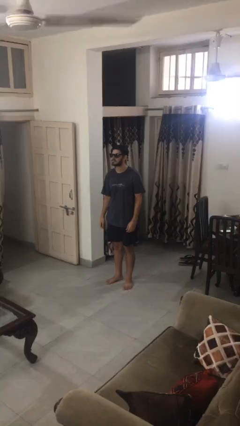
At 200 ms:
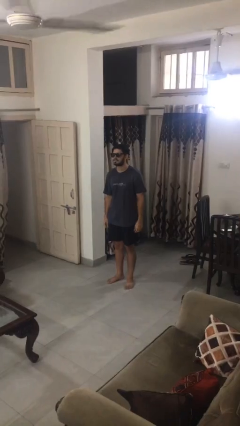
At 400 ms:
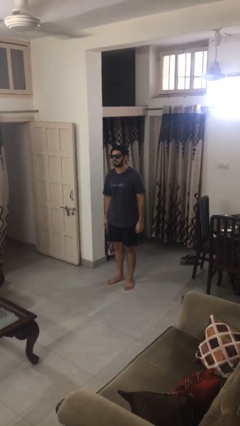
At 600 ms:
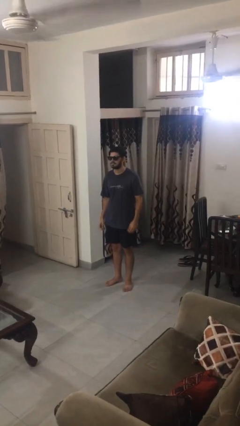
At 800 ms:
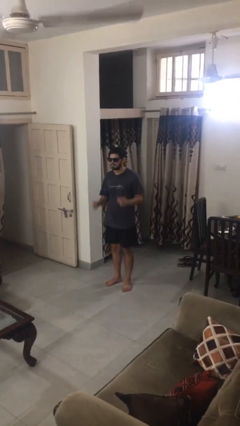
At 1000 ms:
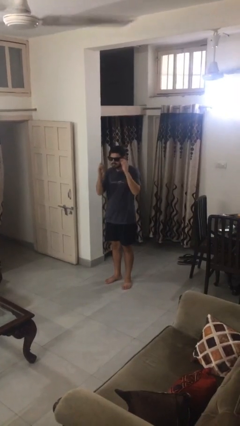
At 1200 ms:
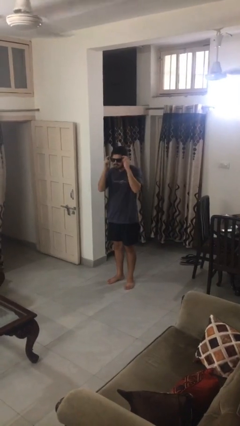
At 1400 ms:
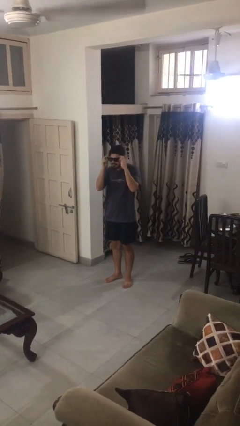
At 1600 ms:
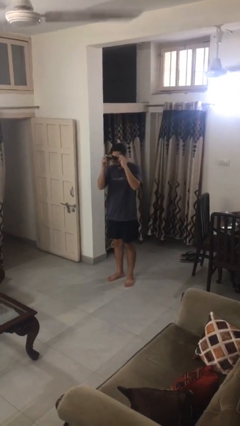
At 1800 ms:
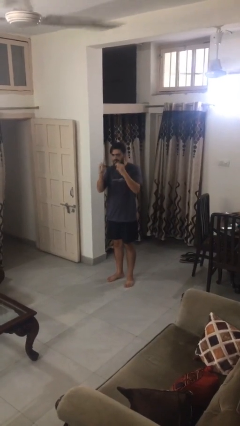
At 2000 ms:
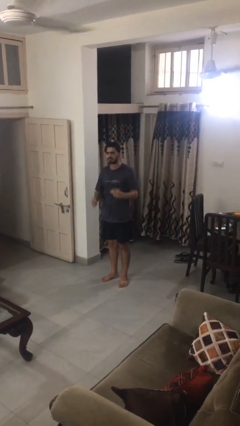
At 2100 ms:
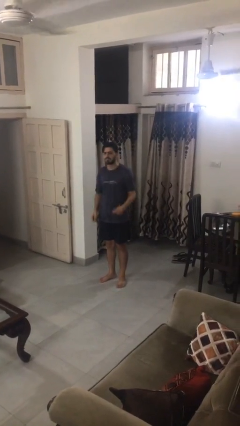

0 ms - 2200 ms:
person takes off sunglasses

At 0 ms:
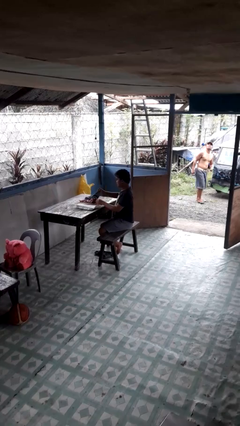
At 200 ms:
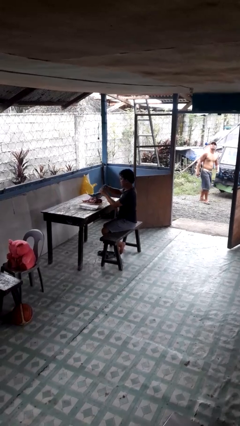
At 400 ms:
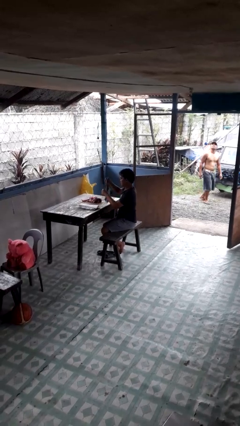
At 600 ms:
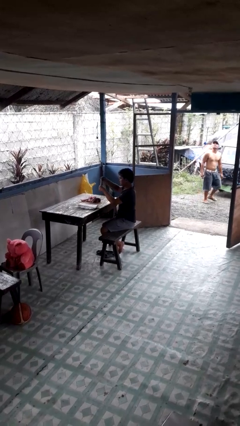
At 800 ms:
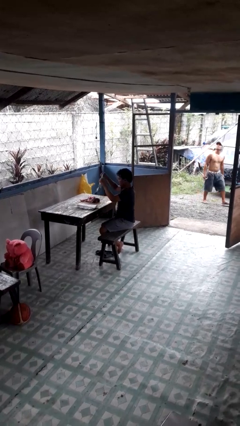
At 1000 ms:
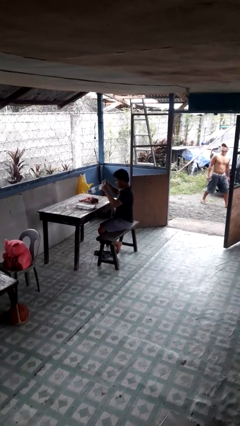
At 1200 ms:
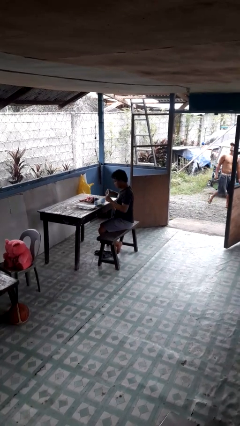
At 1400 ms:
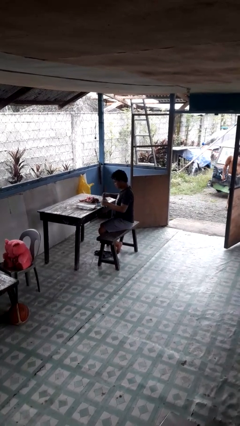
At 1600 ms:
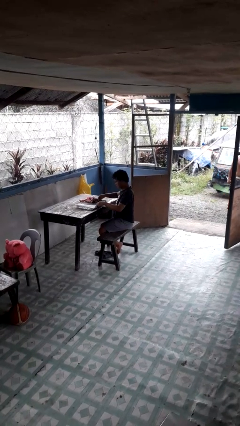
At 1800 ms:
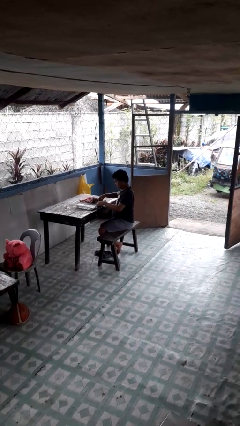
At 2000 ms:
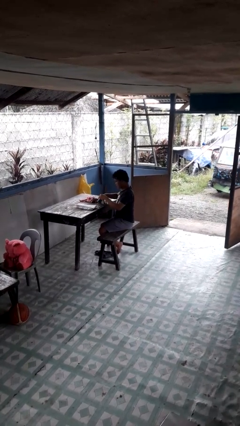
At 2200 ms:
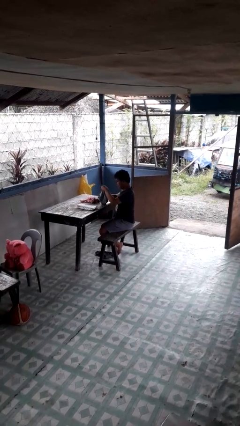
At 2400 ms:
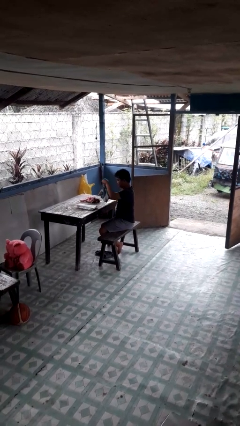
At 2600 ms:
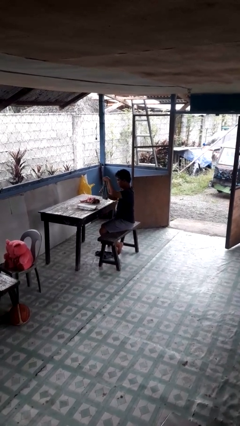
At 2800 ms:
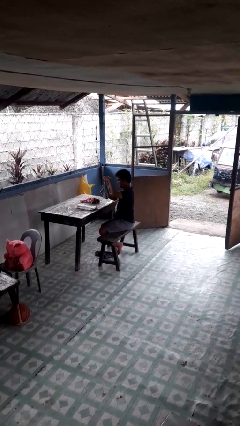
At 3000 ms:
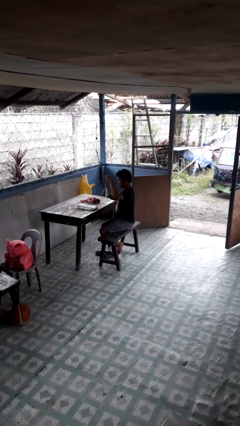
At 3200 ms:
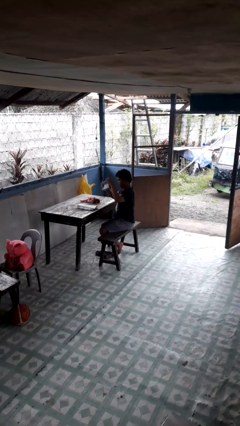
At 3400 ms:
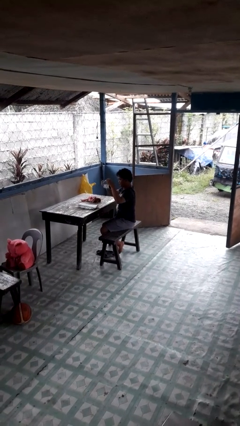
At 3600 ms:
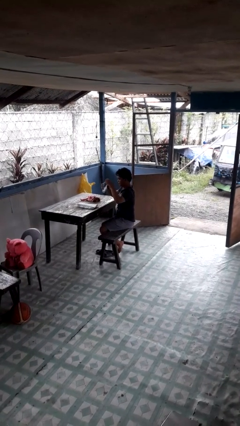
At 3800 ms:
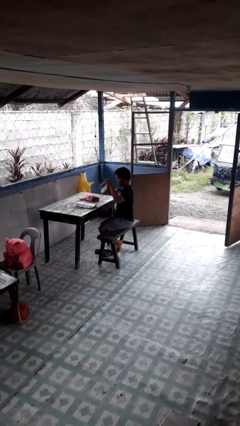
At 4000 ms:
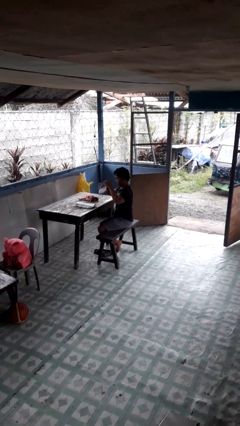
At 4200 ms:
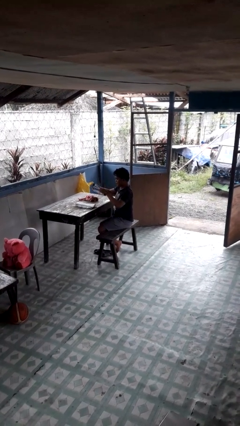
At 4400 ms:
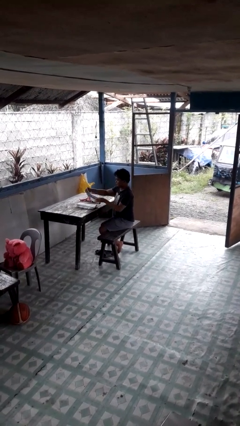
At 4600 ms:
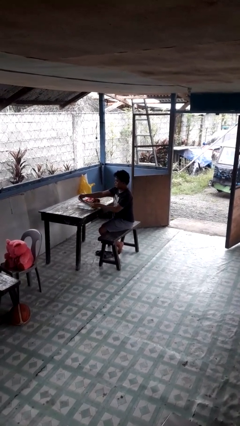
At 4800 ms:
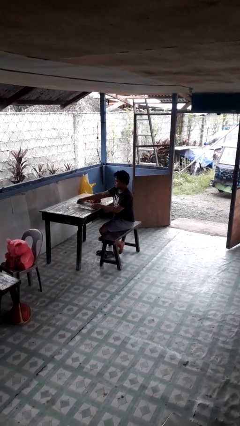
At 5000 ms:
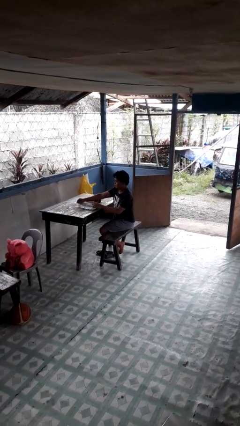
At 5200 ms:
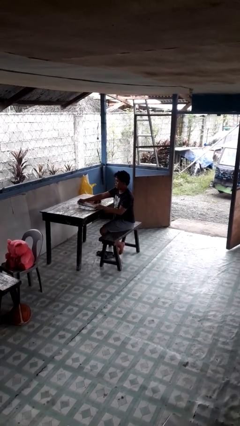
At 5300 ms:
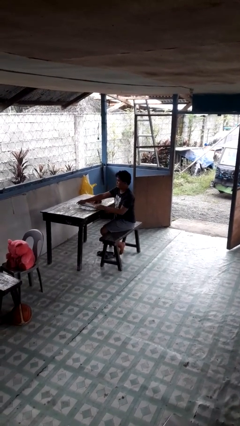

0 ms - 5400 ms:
person folds towel

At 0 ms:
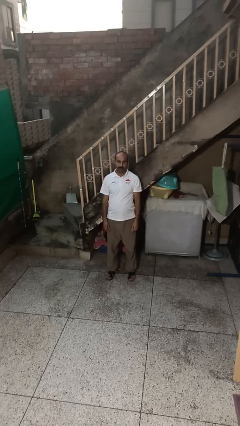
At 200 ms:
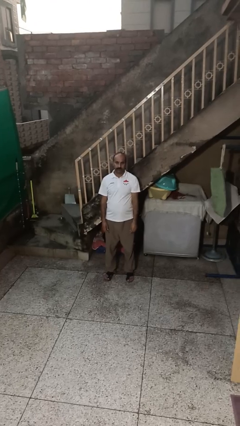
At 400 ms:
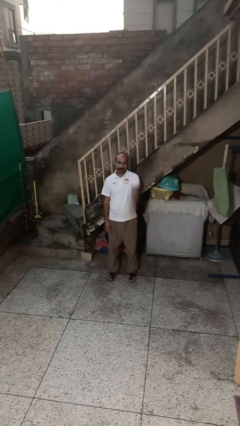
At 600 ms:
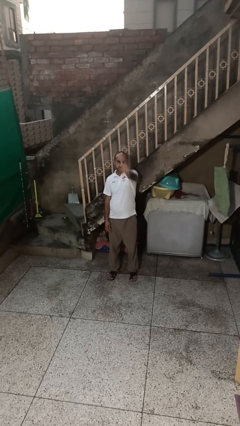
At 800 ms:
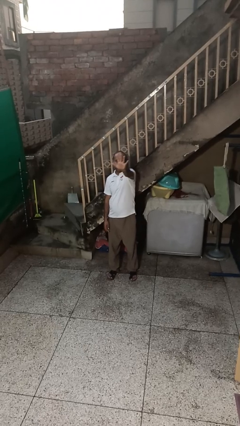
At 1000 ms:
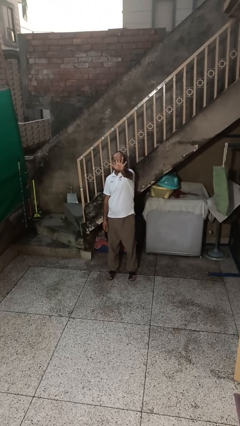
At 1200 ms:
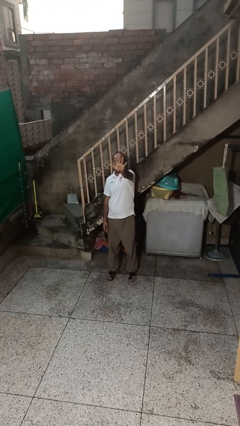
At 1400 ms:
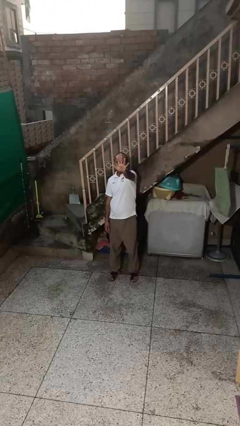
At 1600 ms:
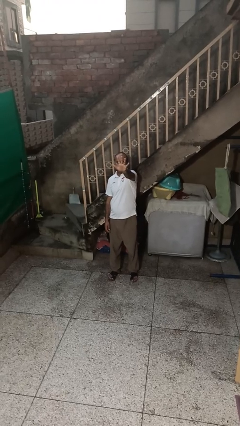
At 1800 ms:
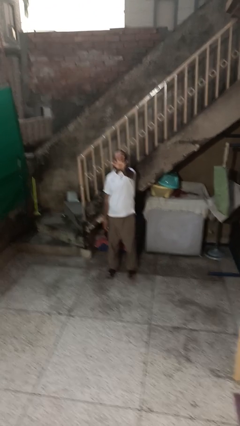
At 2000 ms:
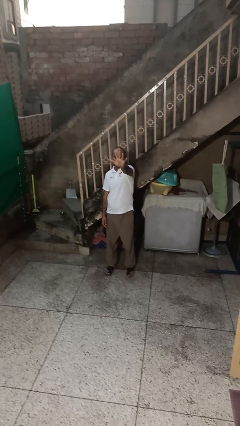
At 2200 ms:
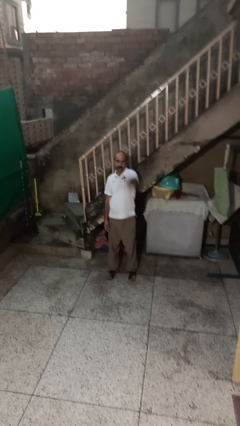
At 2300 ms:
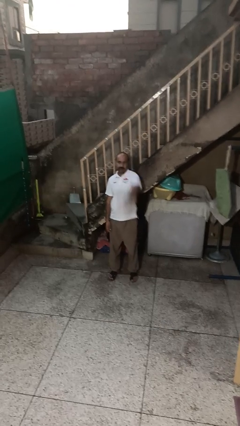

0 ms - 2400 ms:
person gestures number five

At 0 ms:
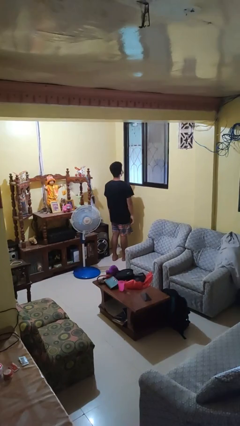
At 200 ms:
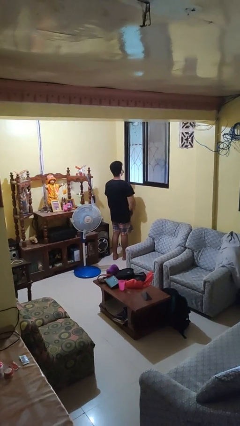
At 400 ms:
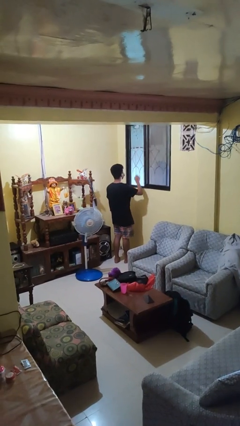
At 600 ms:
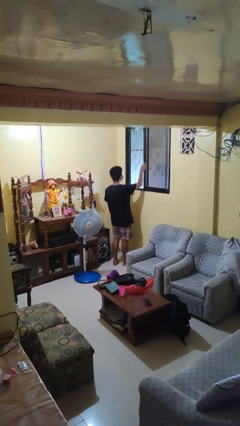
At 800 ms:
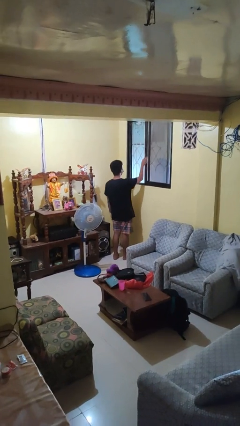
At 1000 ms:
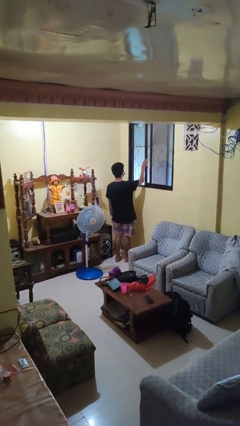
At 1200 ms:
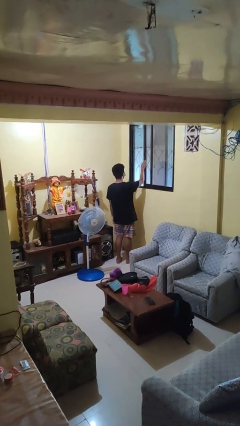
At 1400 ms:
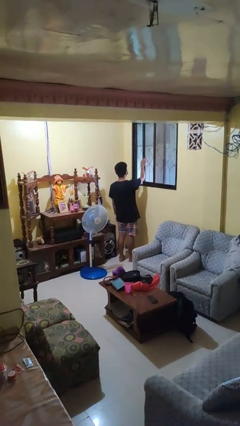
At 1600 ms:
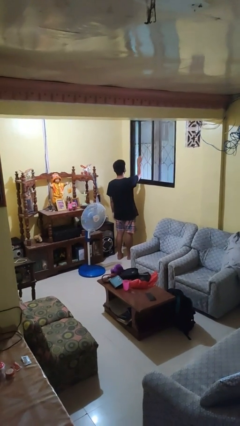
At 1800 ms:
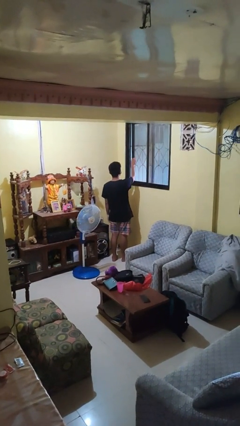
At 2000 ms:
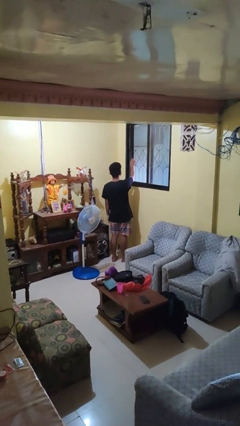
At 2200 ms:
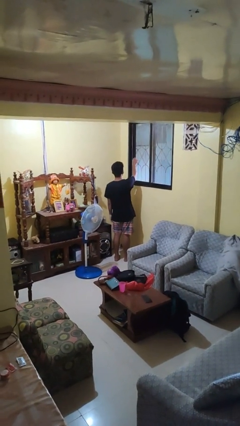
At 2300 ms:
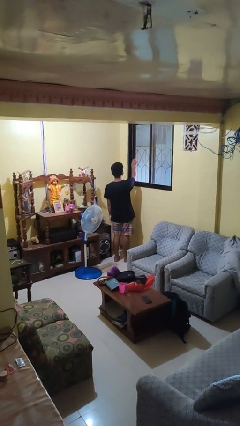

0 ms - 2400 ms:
person closes home window

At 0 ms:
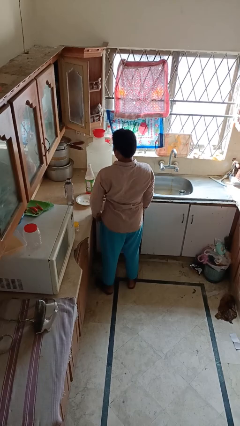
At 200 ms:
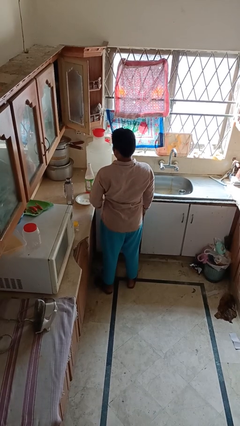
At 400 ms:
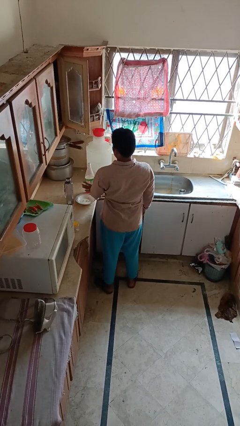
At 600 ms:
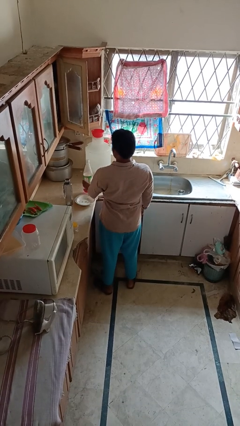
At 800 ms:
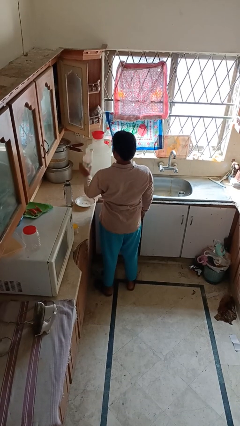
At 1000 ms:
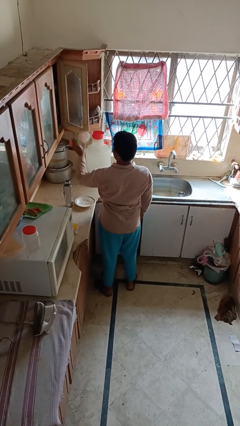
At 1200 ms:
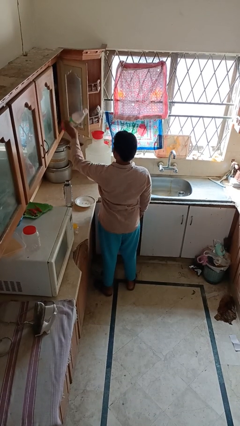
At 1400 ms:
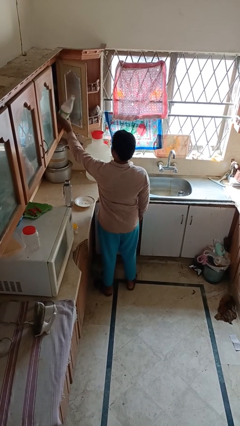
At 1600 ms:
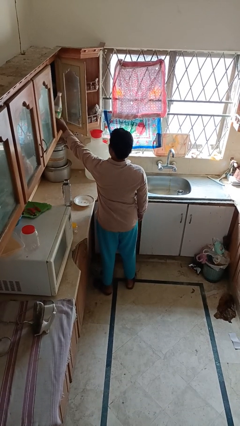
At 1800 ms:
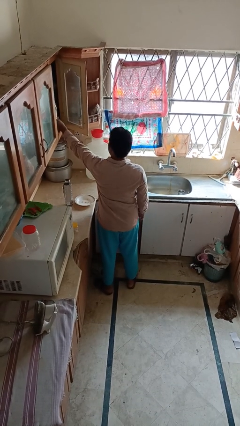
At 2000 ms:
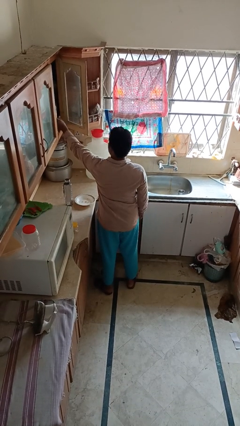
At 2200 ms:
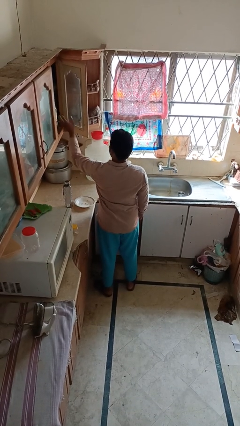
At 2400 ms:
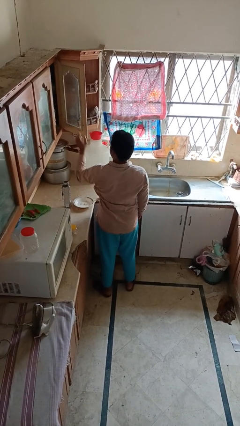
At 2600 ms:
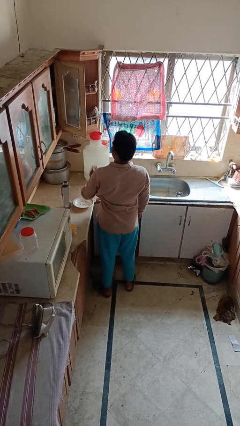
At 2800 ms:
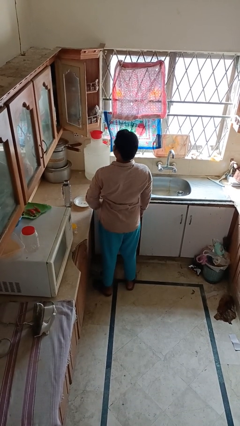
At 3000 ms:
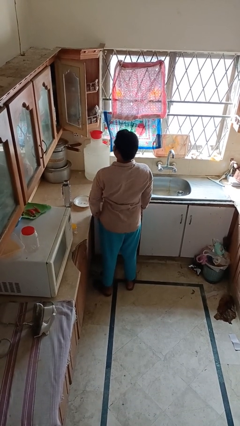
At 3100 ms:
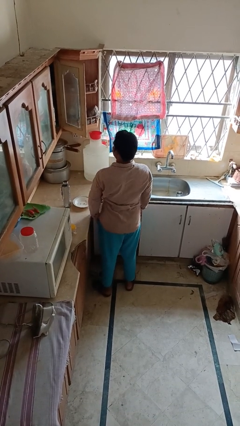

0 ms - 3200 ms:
person puts object in cabinet

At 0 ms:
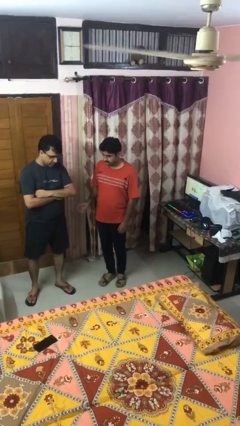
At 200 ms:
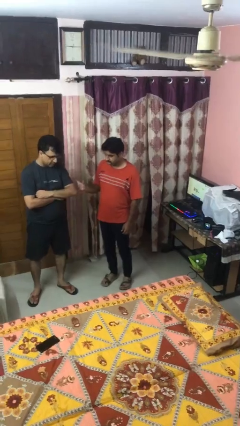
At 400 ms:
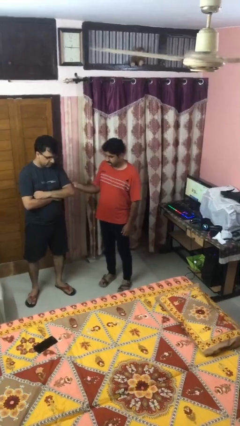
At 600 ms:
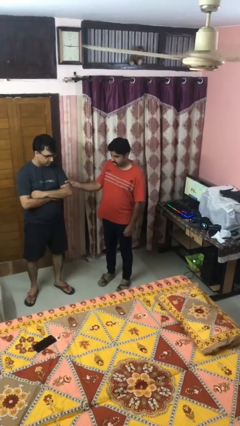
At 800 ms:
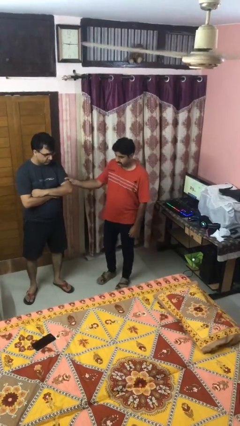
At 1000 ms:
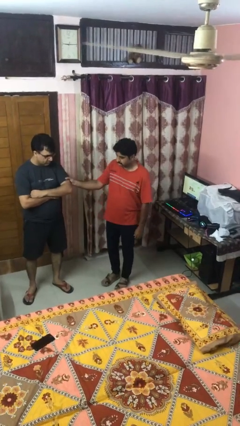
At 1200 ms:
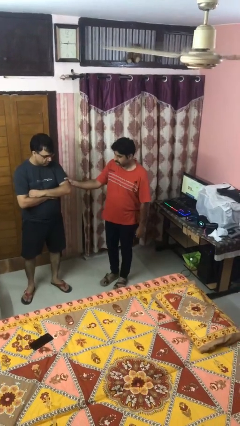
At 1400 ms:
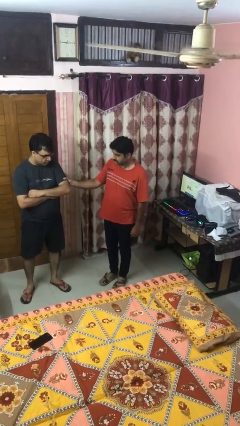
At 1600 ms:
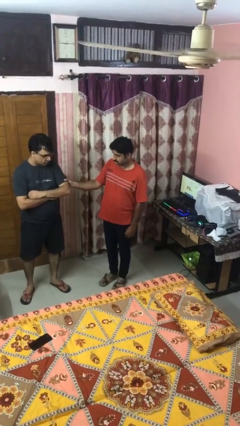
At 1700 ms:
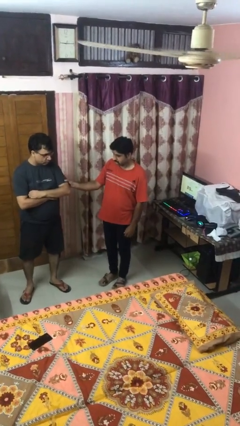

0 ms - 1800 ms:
person grabs person by bicep

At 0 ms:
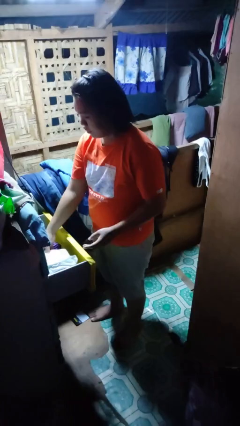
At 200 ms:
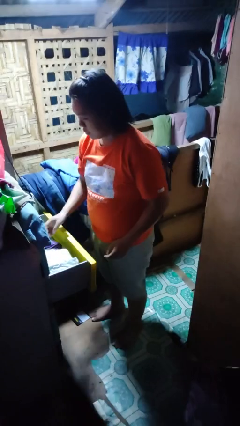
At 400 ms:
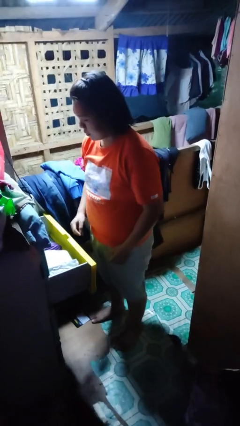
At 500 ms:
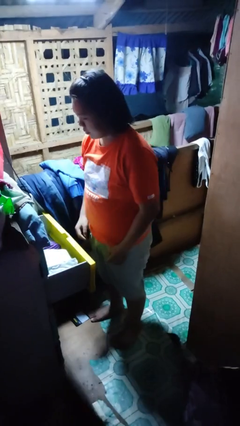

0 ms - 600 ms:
person puts clothes into dresser
